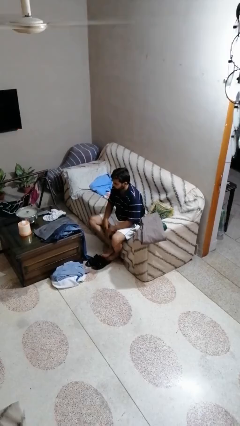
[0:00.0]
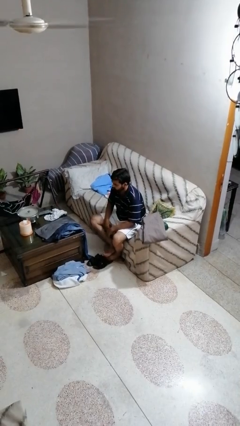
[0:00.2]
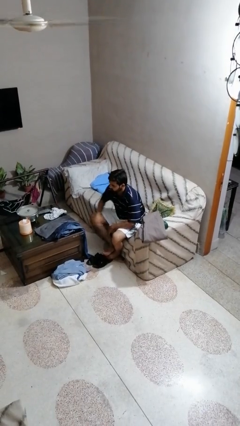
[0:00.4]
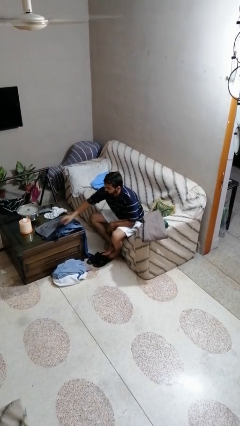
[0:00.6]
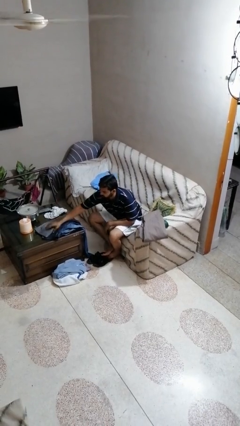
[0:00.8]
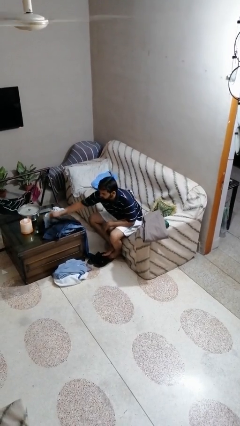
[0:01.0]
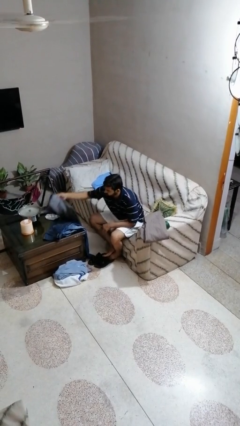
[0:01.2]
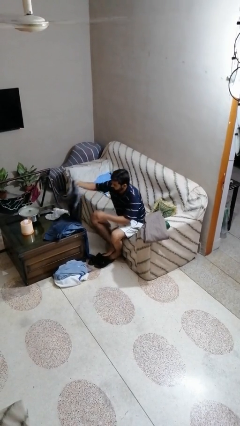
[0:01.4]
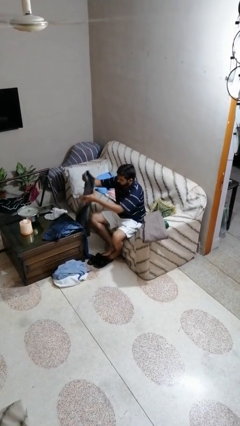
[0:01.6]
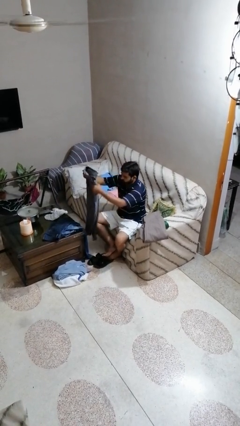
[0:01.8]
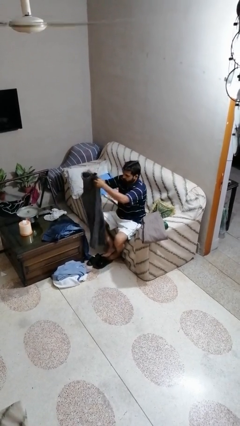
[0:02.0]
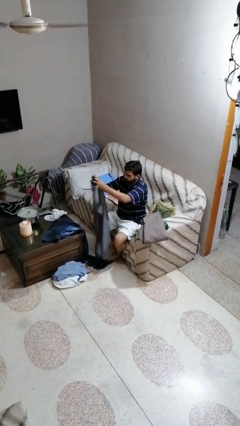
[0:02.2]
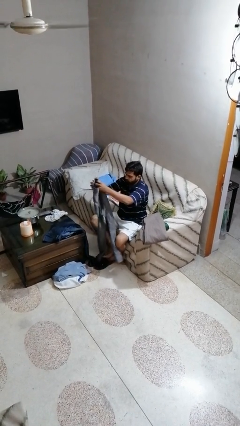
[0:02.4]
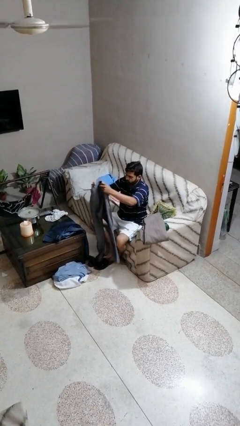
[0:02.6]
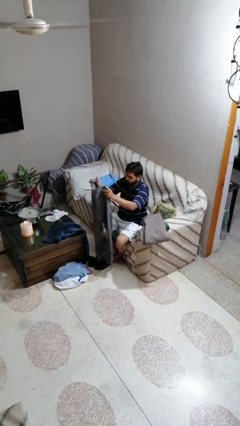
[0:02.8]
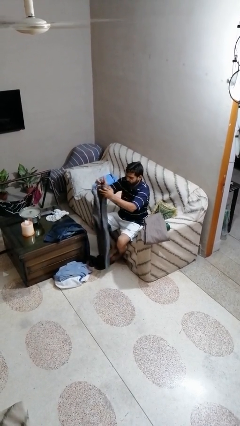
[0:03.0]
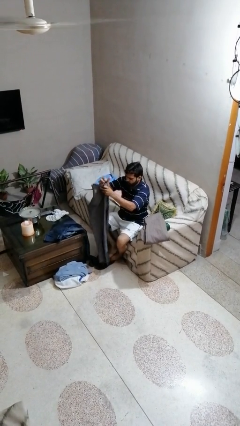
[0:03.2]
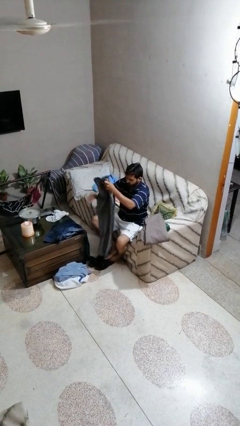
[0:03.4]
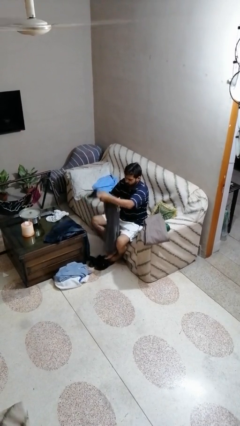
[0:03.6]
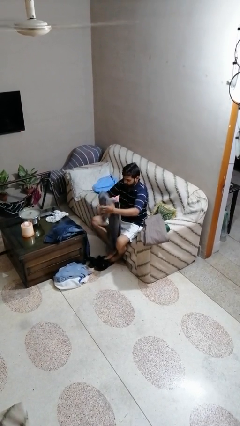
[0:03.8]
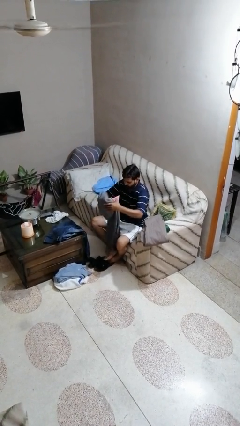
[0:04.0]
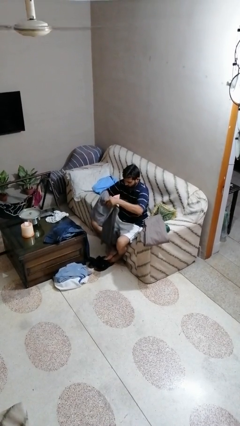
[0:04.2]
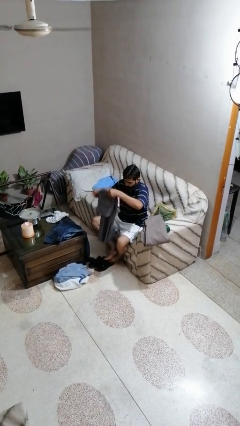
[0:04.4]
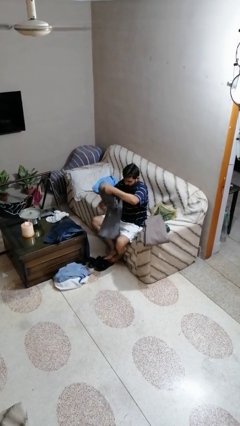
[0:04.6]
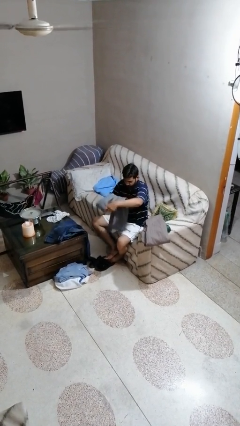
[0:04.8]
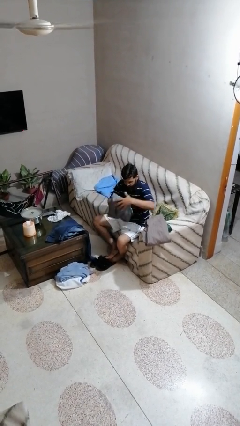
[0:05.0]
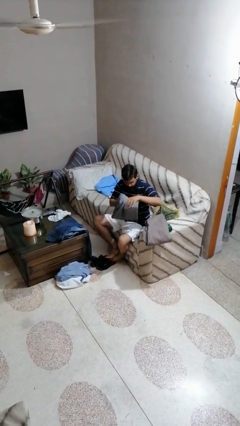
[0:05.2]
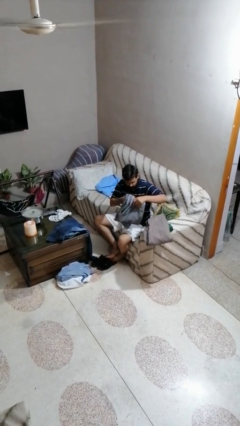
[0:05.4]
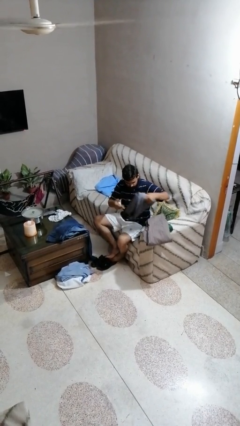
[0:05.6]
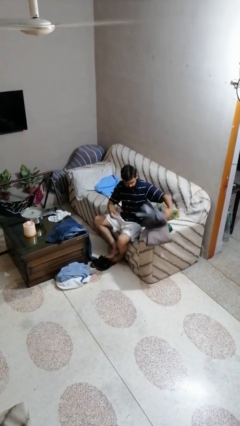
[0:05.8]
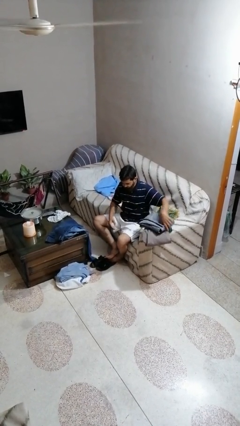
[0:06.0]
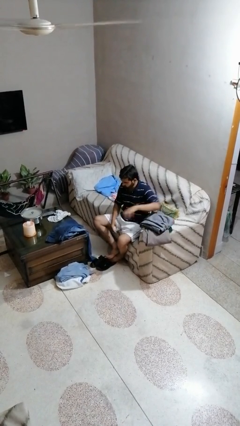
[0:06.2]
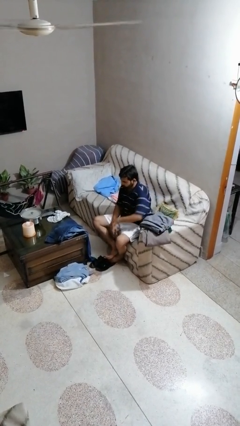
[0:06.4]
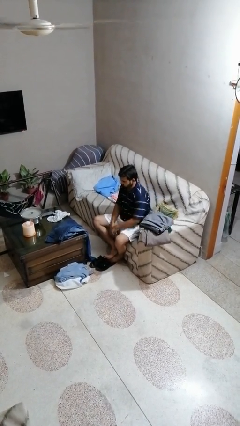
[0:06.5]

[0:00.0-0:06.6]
person folds pants

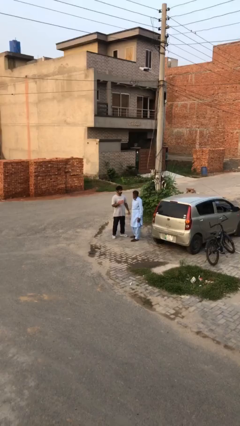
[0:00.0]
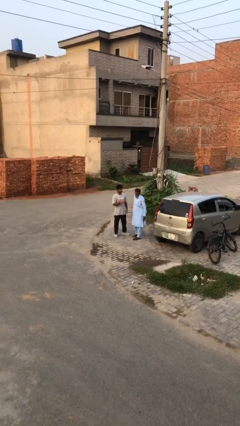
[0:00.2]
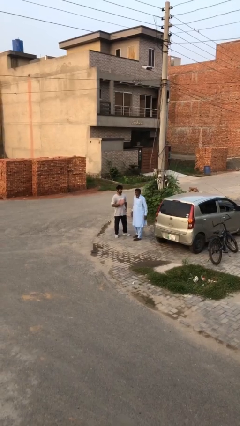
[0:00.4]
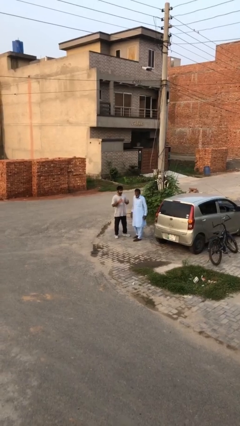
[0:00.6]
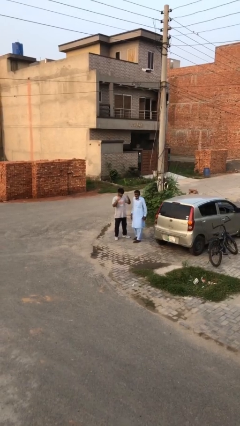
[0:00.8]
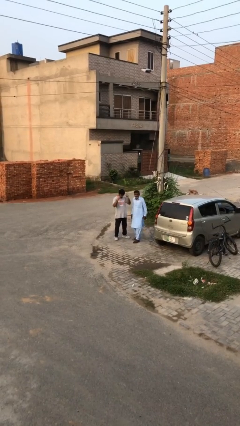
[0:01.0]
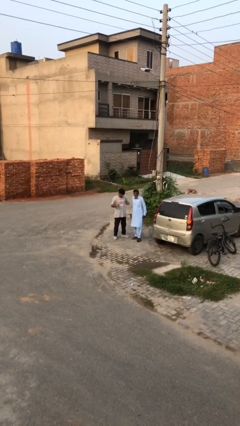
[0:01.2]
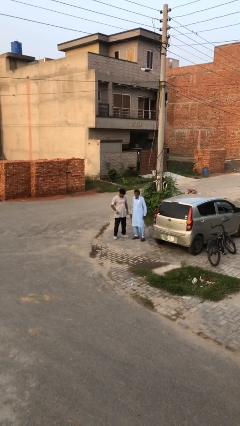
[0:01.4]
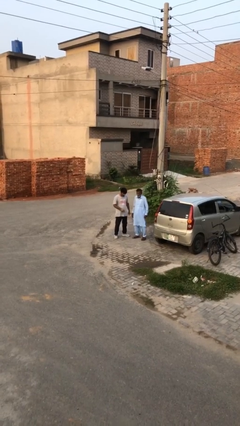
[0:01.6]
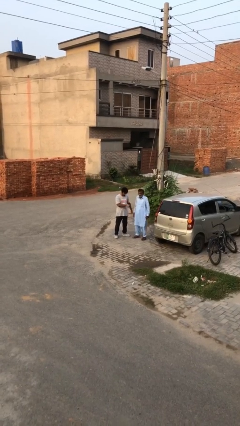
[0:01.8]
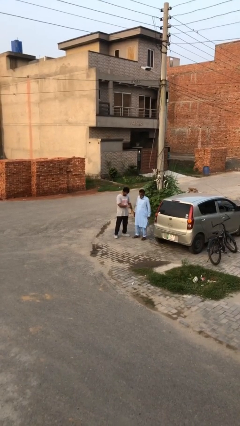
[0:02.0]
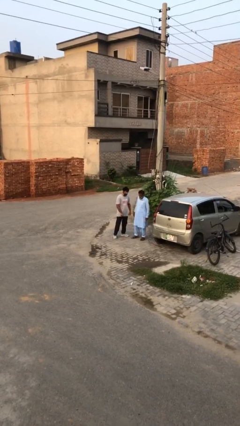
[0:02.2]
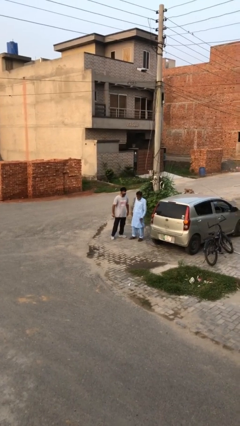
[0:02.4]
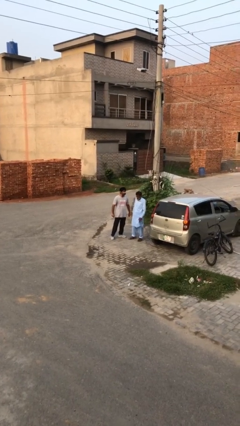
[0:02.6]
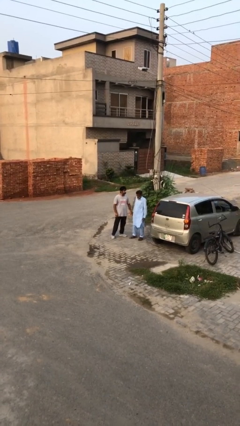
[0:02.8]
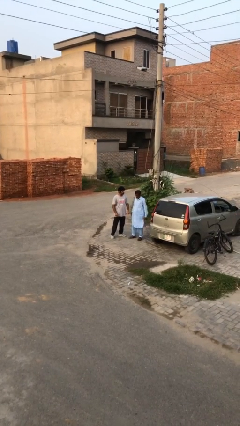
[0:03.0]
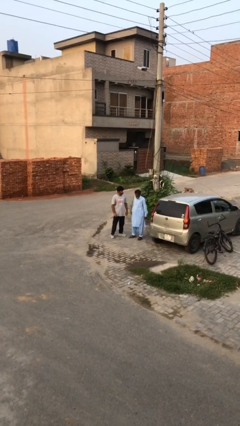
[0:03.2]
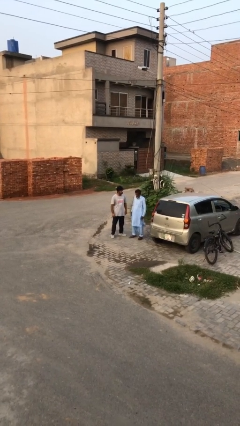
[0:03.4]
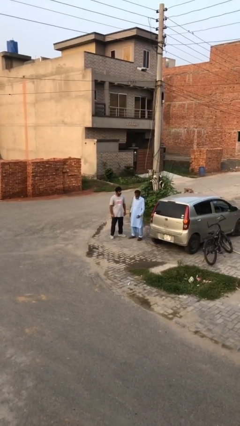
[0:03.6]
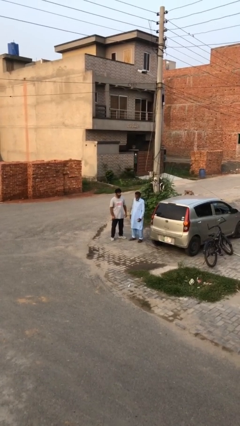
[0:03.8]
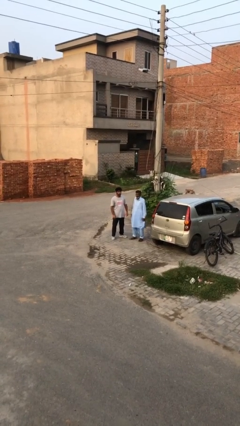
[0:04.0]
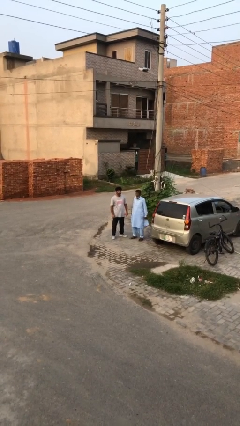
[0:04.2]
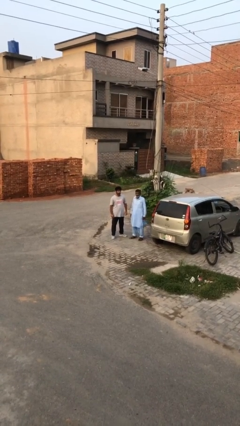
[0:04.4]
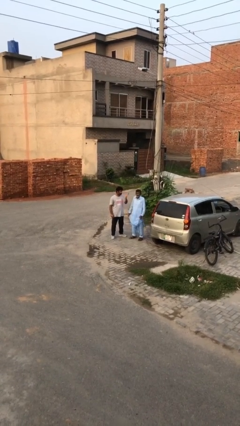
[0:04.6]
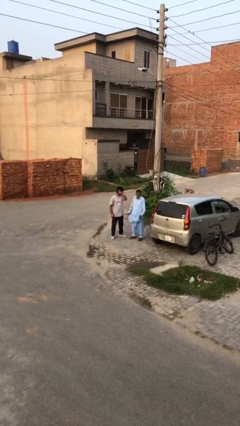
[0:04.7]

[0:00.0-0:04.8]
person talks to person

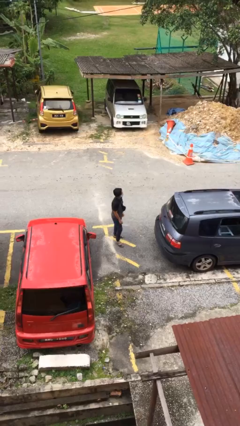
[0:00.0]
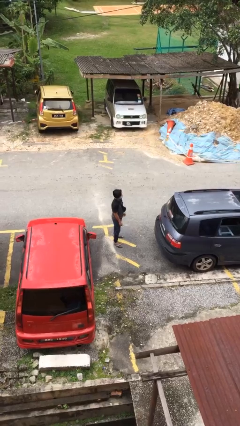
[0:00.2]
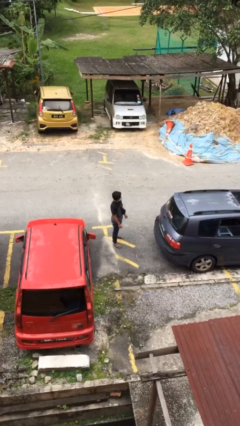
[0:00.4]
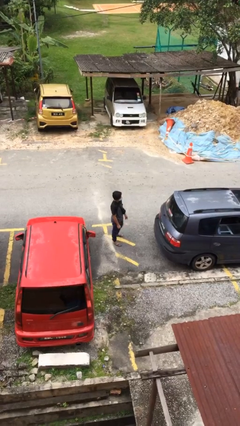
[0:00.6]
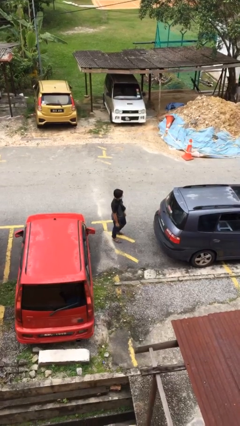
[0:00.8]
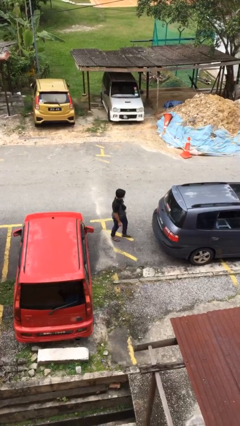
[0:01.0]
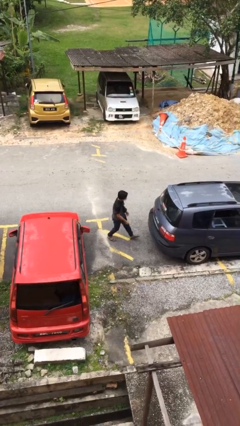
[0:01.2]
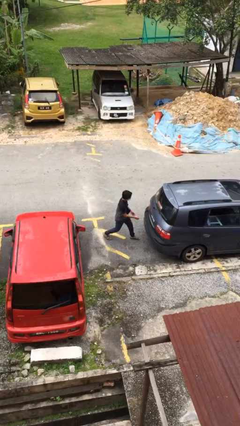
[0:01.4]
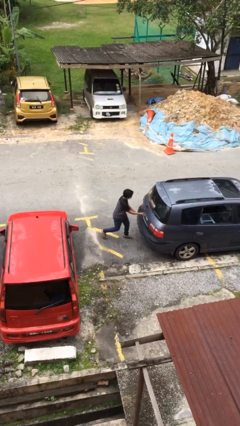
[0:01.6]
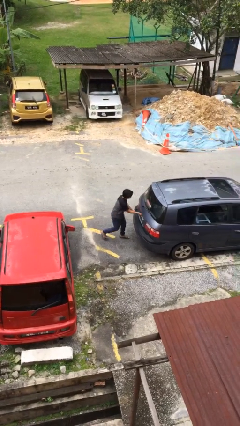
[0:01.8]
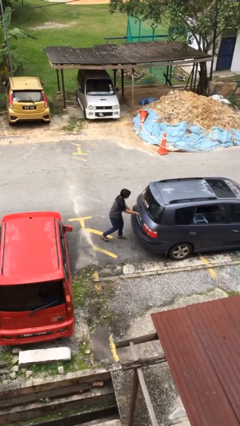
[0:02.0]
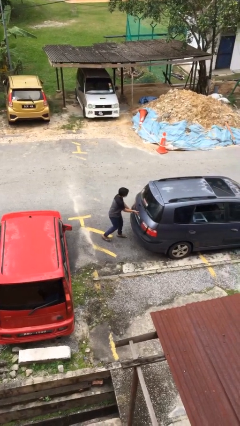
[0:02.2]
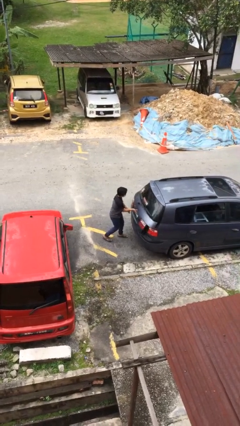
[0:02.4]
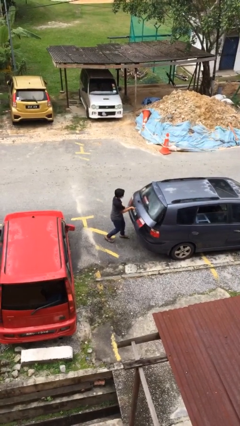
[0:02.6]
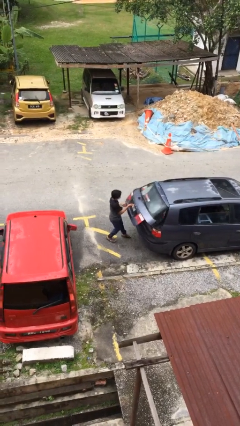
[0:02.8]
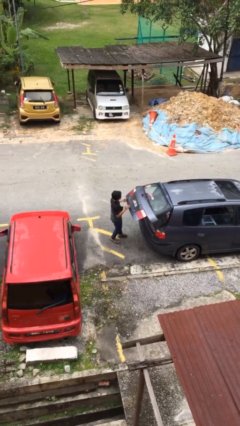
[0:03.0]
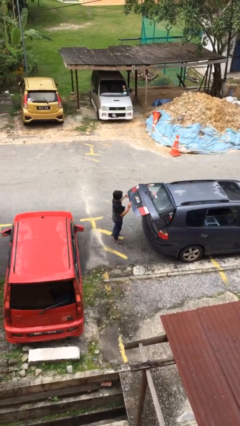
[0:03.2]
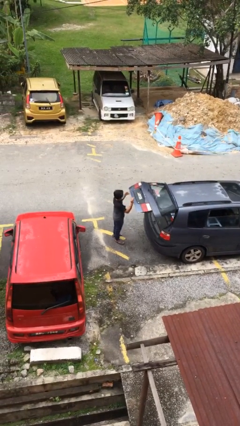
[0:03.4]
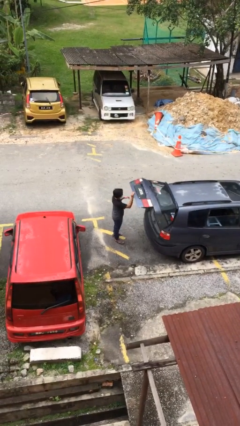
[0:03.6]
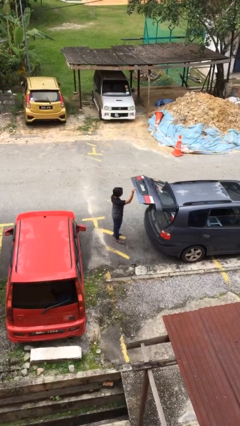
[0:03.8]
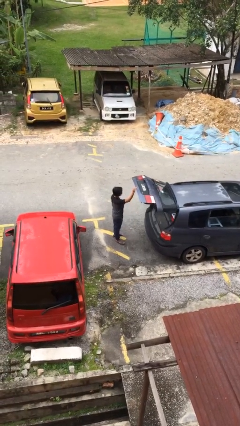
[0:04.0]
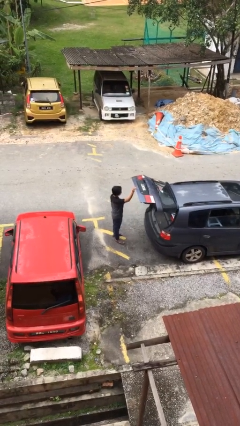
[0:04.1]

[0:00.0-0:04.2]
person opens car trunk

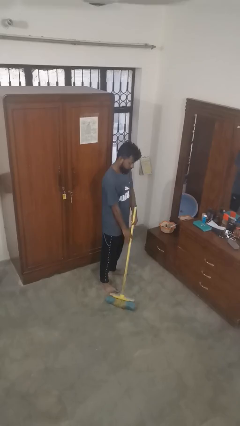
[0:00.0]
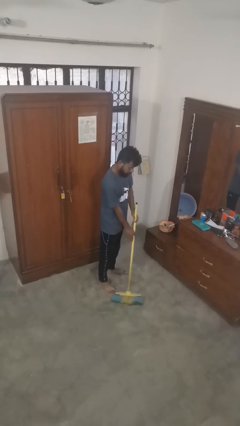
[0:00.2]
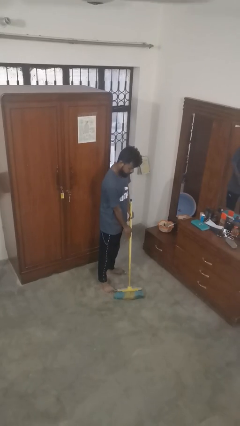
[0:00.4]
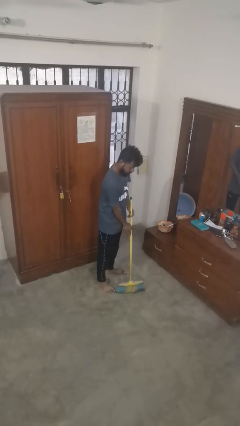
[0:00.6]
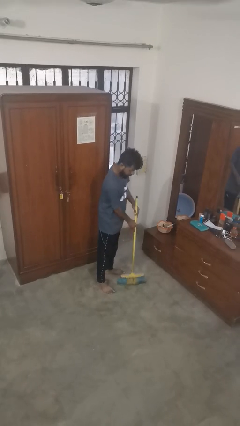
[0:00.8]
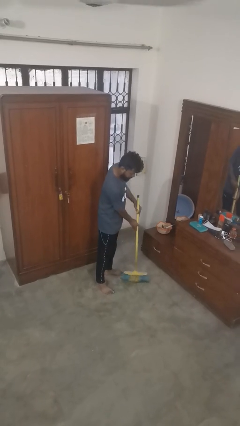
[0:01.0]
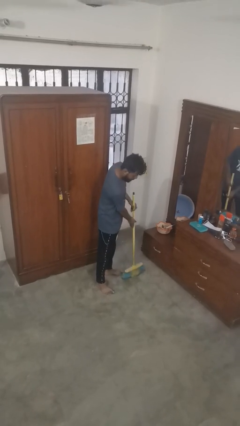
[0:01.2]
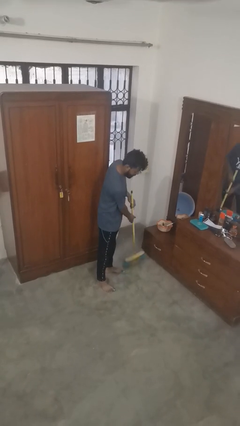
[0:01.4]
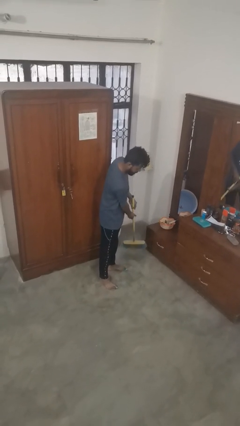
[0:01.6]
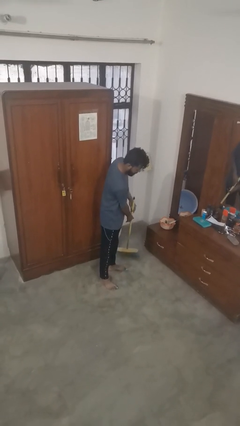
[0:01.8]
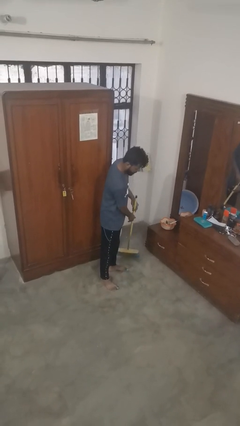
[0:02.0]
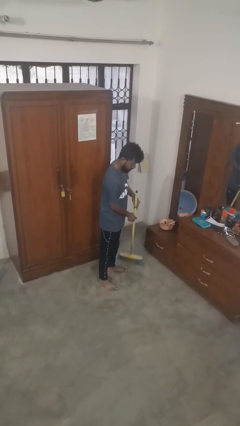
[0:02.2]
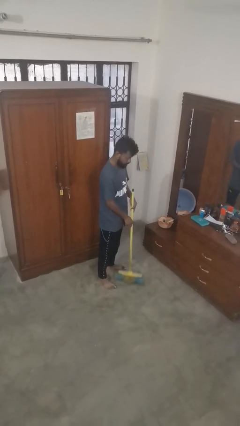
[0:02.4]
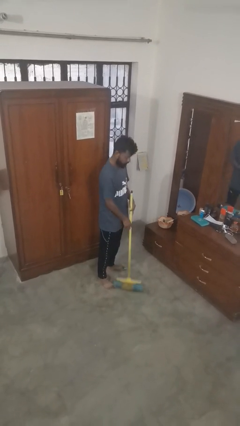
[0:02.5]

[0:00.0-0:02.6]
person sweeps floor
